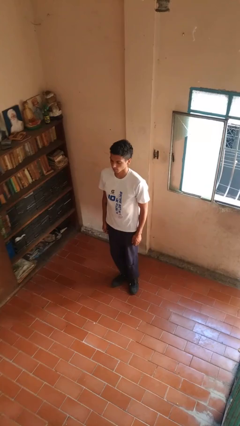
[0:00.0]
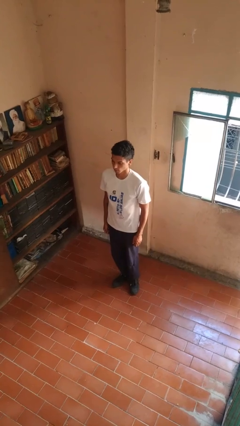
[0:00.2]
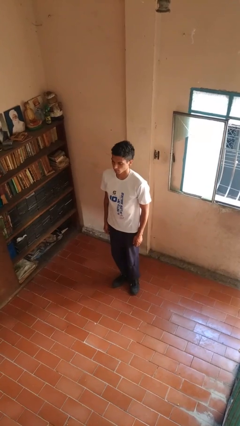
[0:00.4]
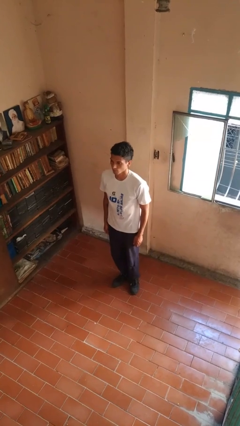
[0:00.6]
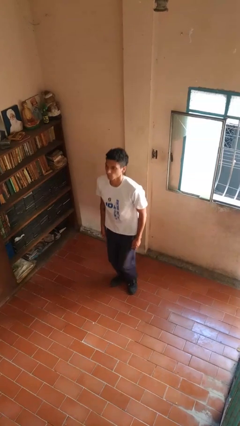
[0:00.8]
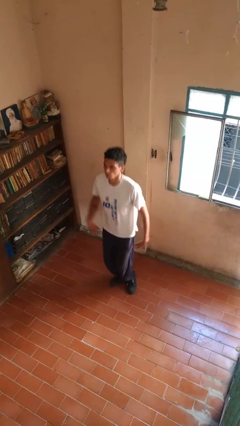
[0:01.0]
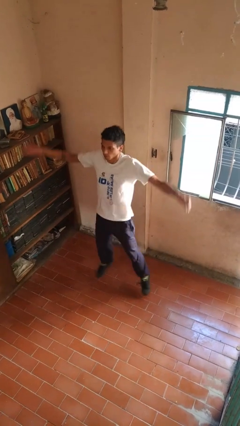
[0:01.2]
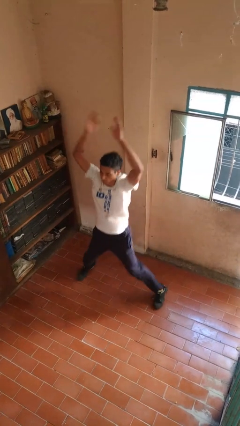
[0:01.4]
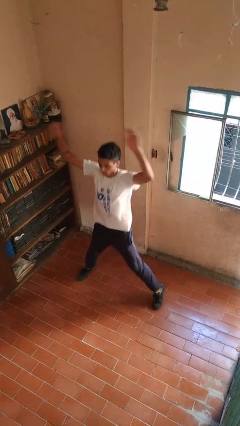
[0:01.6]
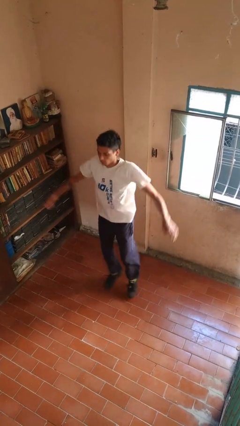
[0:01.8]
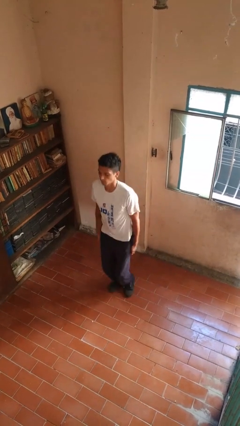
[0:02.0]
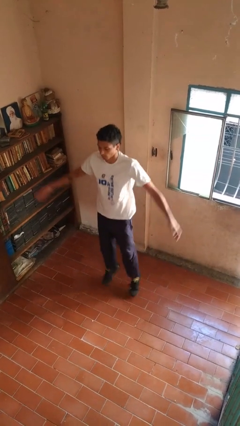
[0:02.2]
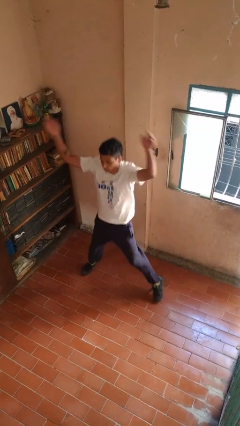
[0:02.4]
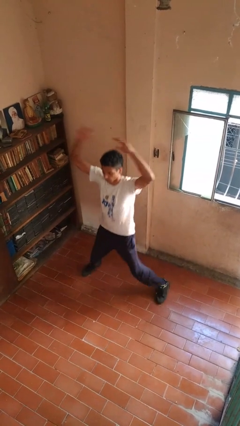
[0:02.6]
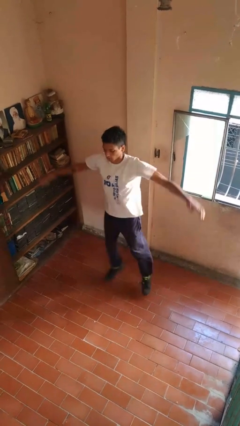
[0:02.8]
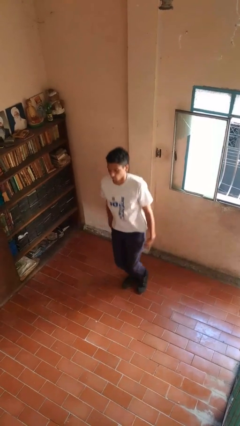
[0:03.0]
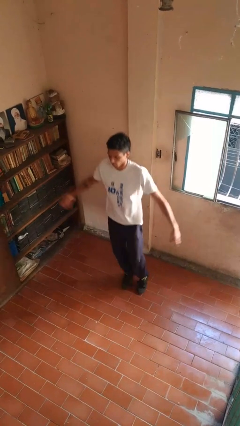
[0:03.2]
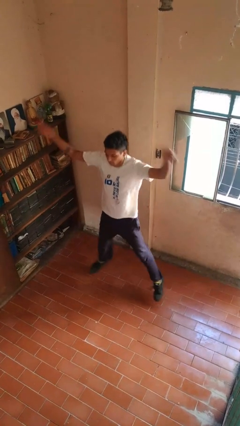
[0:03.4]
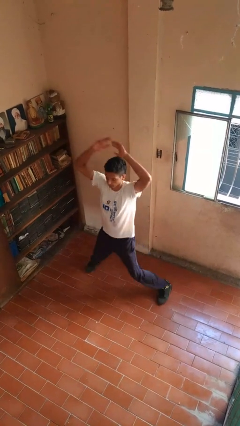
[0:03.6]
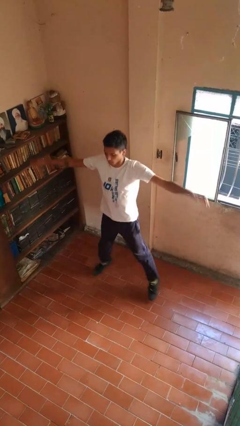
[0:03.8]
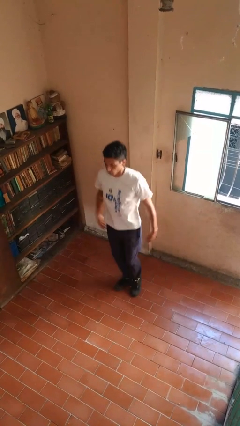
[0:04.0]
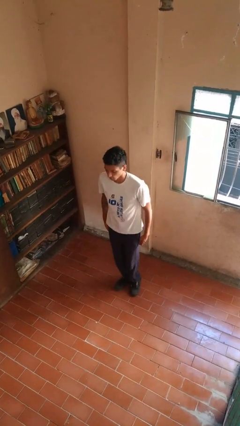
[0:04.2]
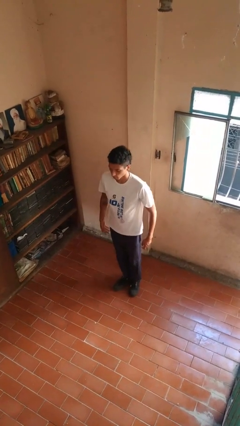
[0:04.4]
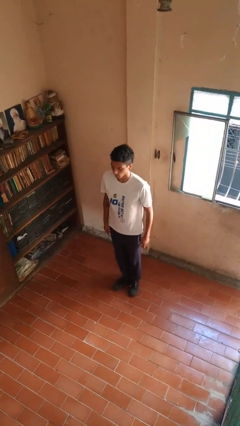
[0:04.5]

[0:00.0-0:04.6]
person exercises with jumping jacks

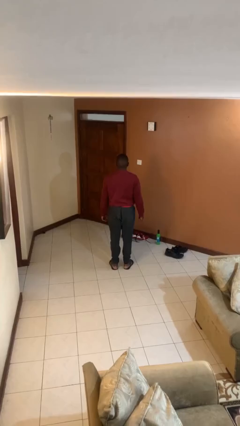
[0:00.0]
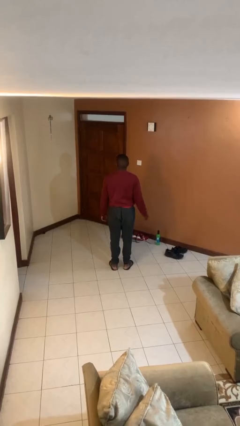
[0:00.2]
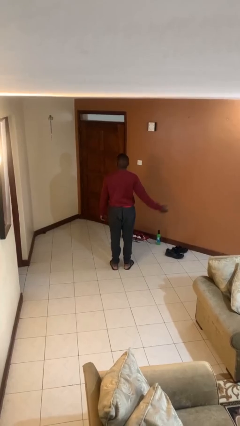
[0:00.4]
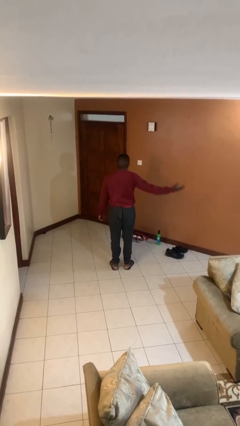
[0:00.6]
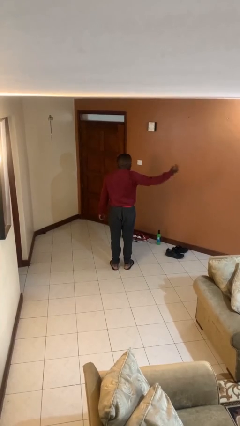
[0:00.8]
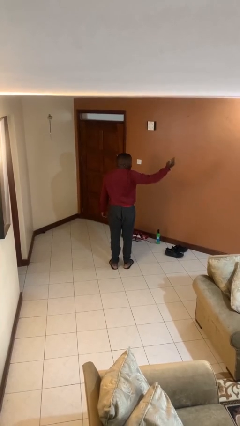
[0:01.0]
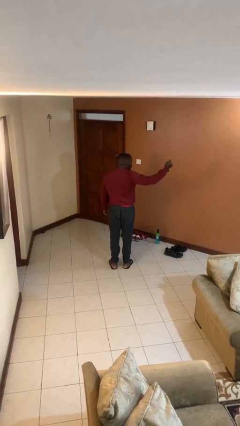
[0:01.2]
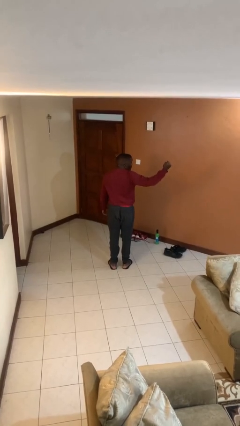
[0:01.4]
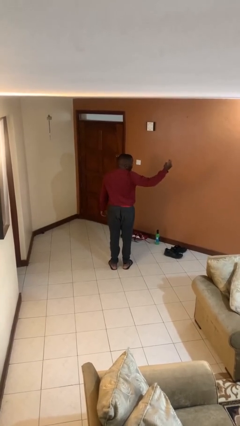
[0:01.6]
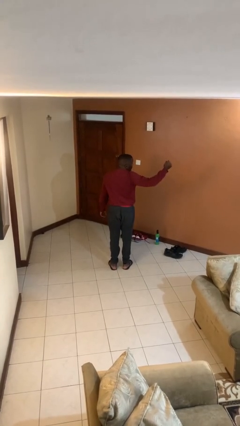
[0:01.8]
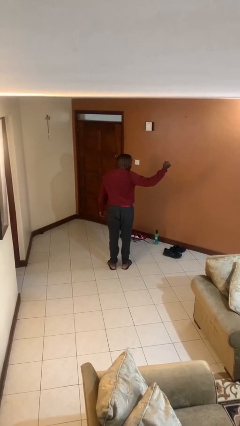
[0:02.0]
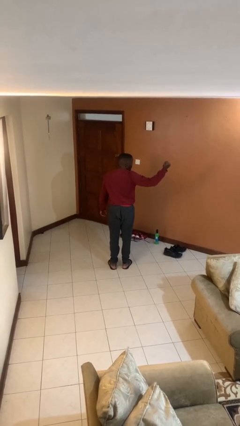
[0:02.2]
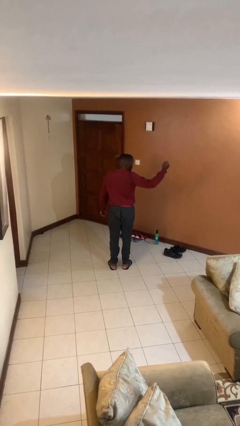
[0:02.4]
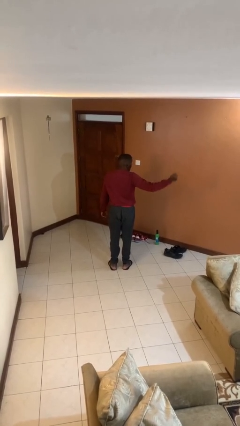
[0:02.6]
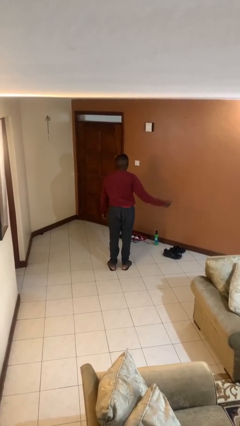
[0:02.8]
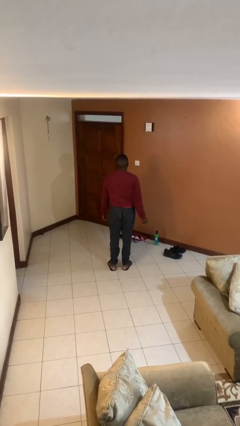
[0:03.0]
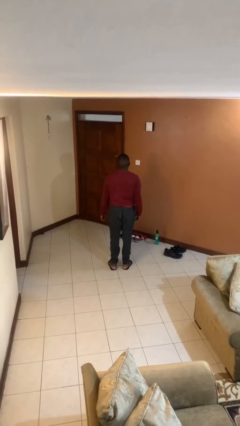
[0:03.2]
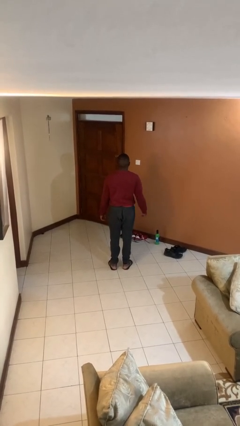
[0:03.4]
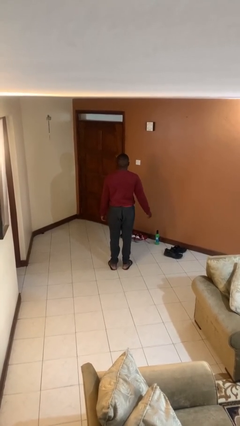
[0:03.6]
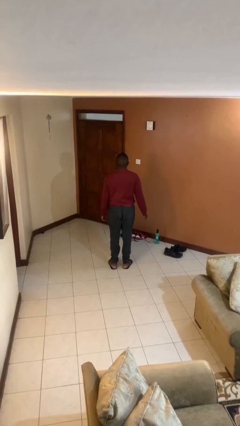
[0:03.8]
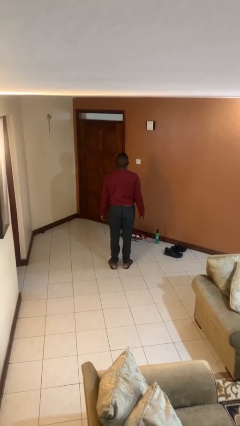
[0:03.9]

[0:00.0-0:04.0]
person gestures come here

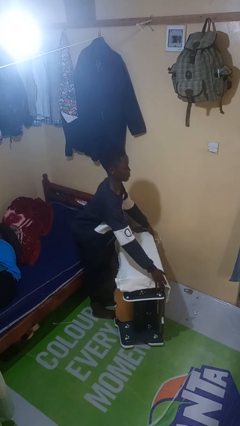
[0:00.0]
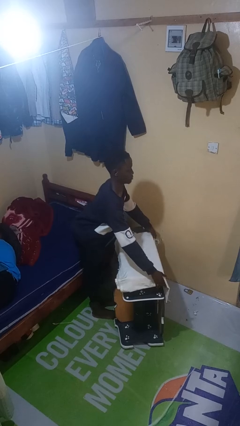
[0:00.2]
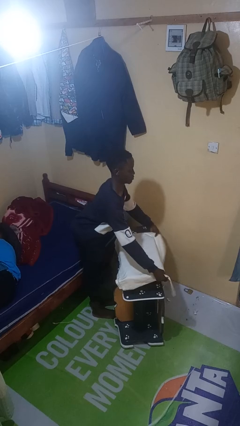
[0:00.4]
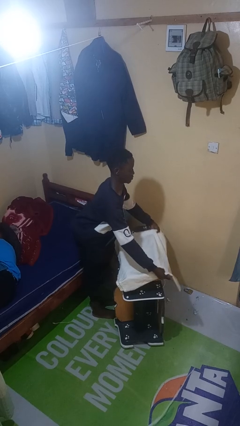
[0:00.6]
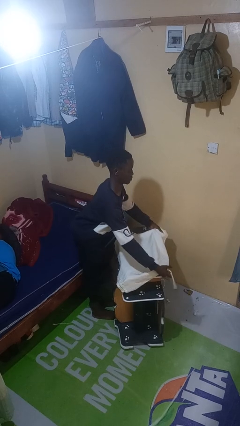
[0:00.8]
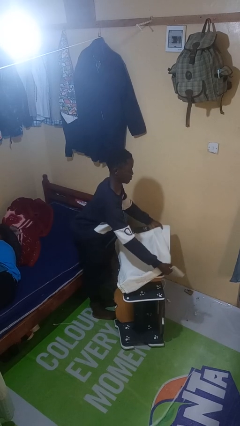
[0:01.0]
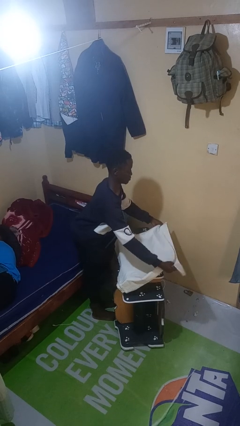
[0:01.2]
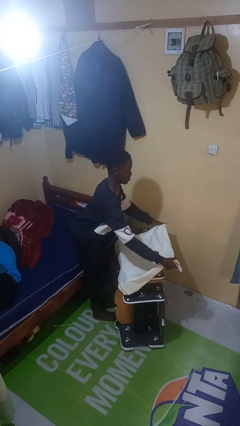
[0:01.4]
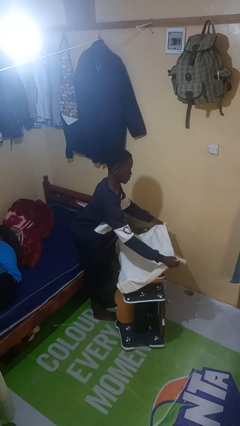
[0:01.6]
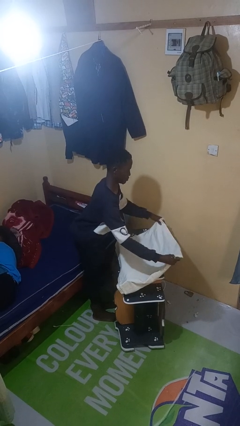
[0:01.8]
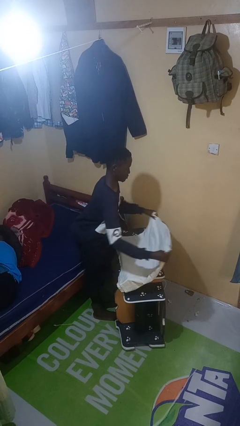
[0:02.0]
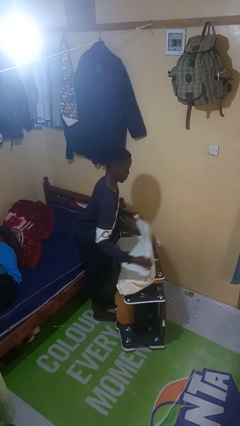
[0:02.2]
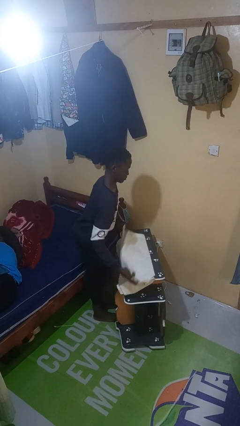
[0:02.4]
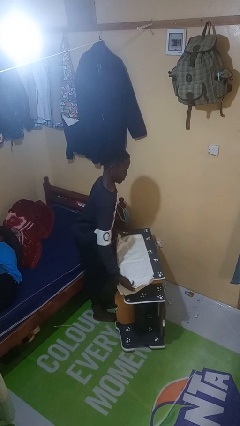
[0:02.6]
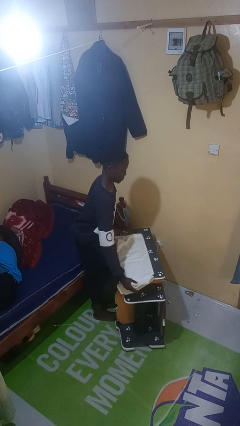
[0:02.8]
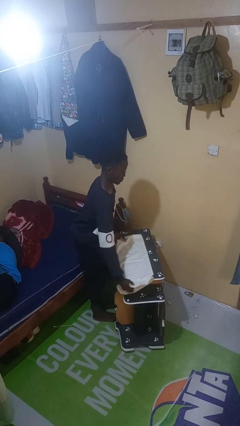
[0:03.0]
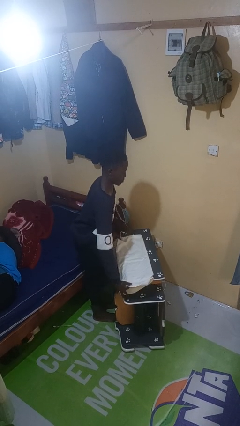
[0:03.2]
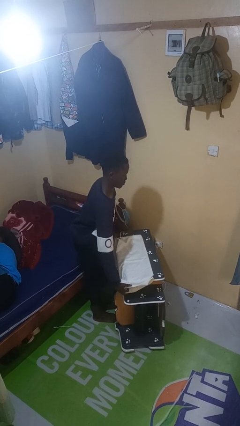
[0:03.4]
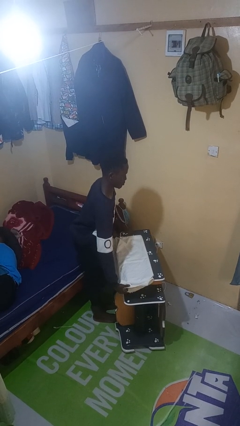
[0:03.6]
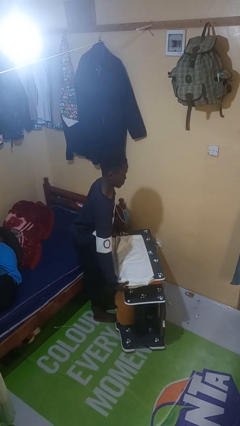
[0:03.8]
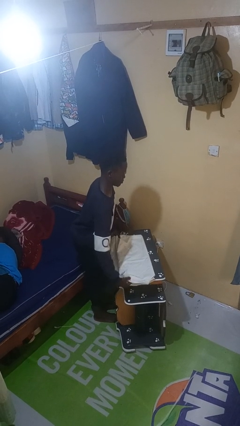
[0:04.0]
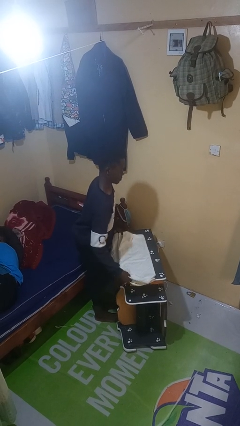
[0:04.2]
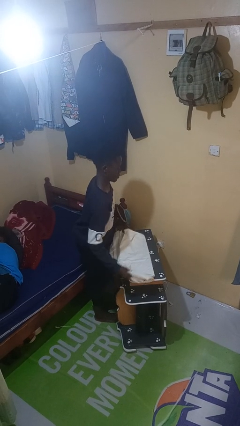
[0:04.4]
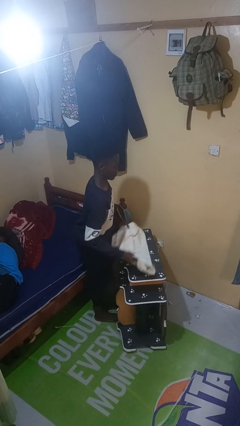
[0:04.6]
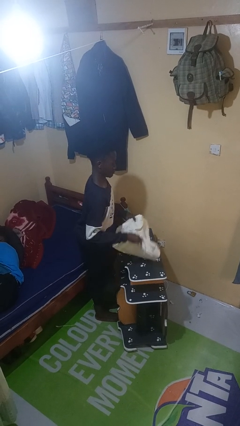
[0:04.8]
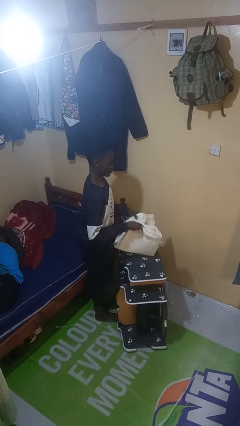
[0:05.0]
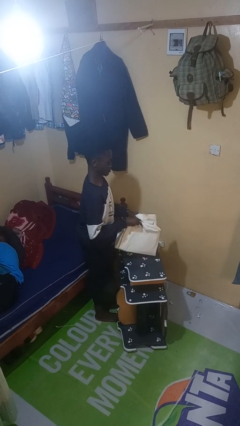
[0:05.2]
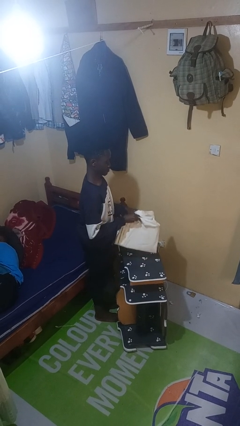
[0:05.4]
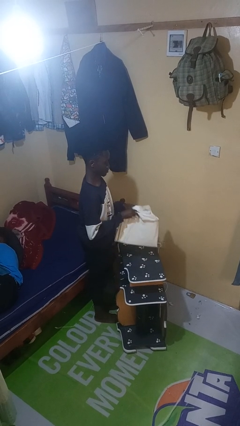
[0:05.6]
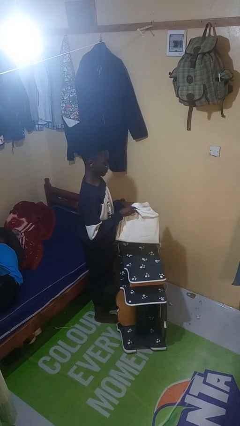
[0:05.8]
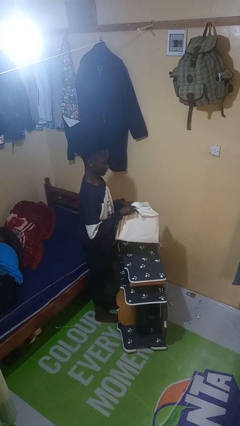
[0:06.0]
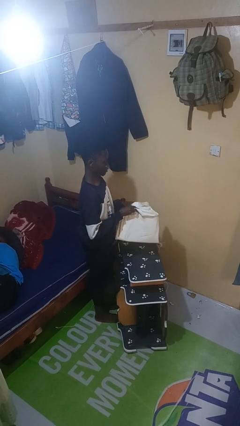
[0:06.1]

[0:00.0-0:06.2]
person folds tablecloth

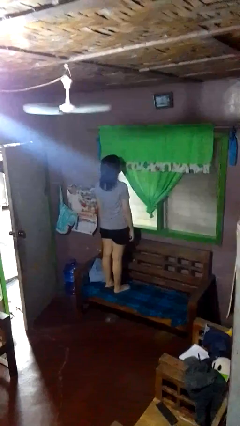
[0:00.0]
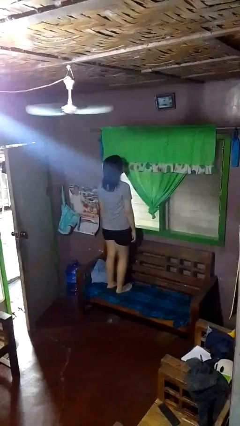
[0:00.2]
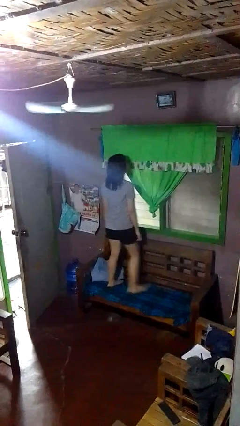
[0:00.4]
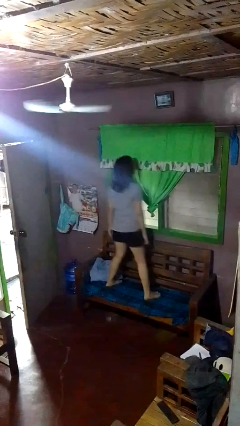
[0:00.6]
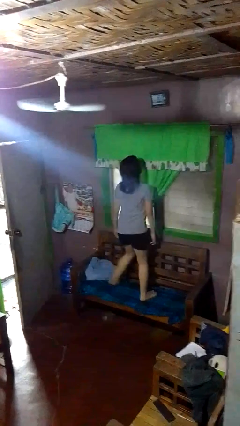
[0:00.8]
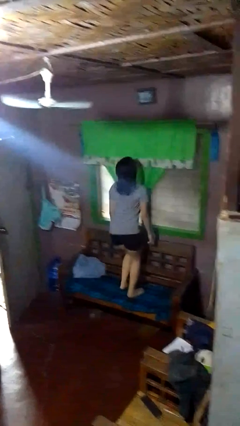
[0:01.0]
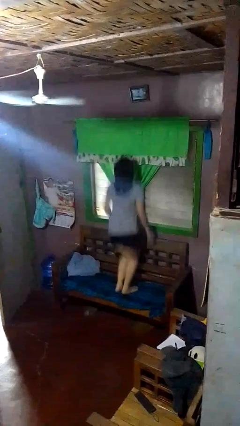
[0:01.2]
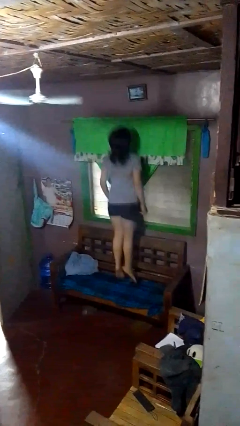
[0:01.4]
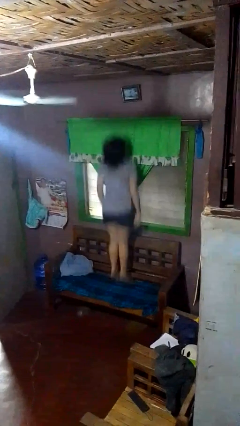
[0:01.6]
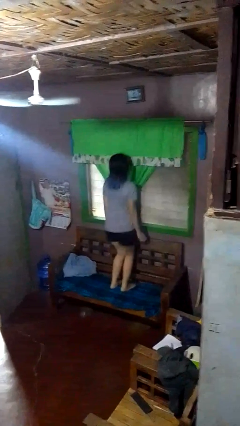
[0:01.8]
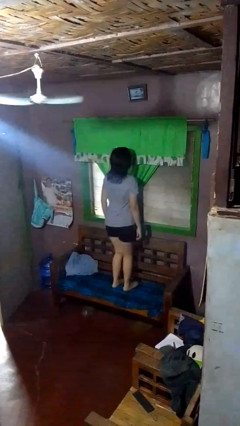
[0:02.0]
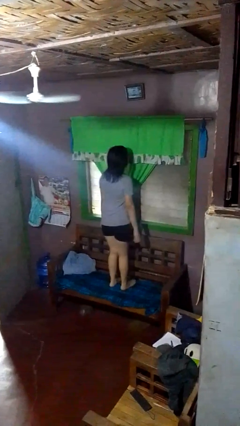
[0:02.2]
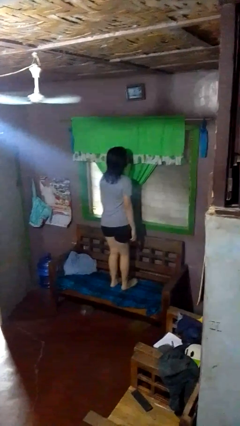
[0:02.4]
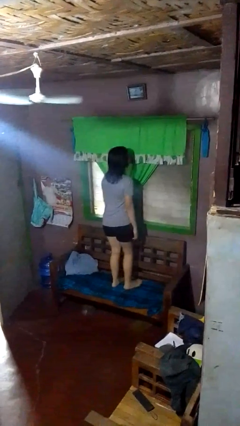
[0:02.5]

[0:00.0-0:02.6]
person jumps on couch

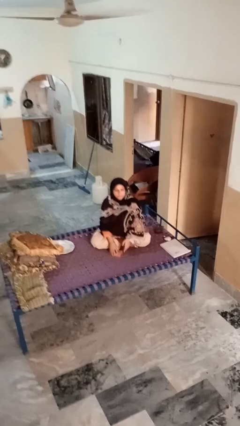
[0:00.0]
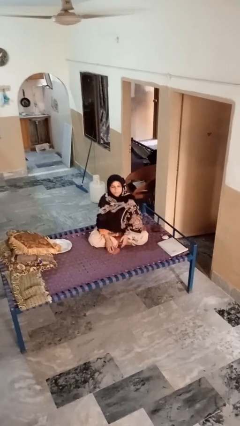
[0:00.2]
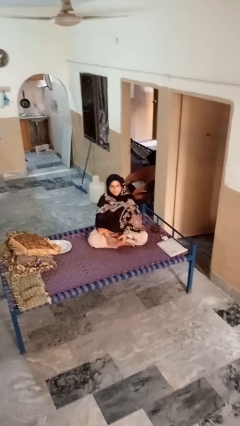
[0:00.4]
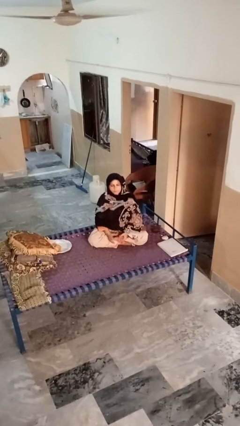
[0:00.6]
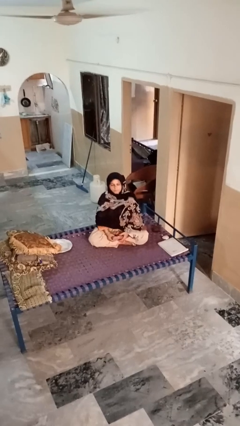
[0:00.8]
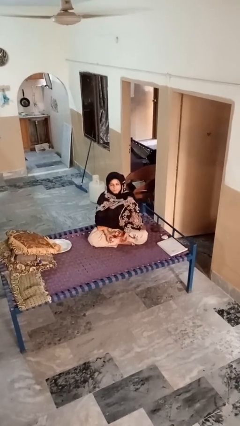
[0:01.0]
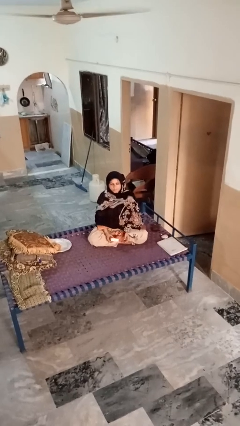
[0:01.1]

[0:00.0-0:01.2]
person picks up object from floor
